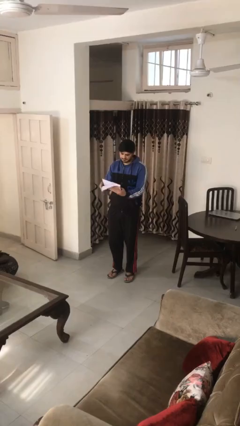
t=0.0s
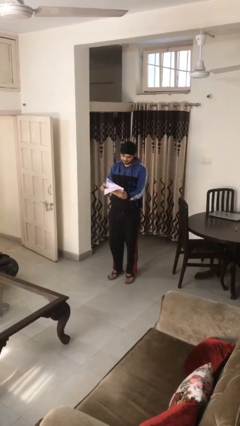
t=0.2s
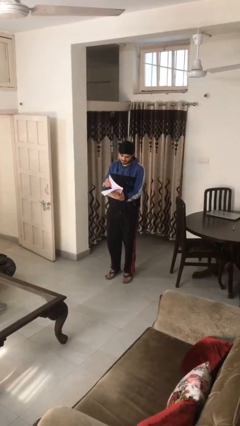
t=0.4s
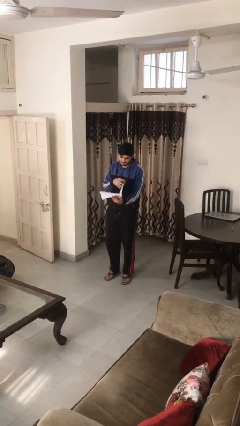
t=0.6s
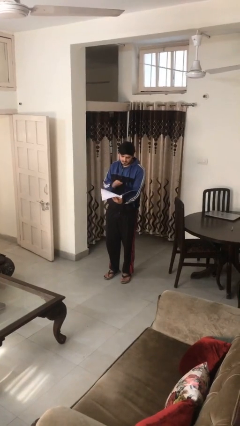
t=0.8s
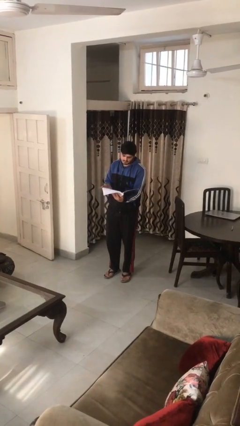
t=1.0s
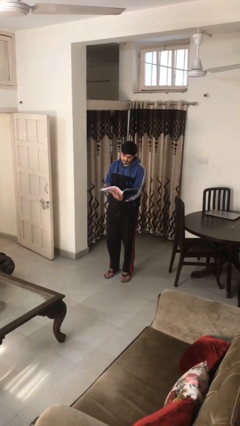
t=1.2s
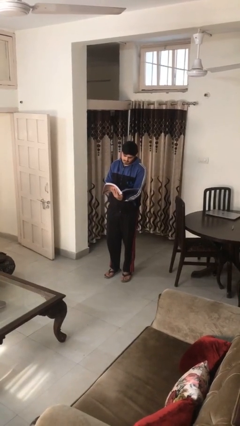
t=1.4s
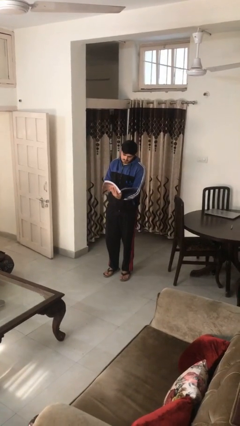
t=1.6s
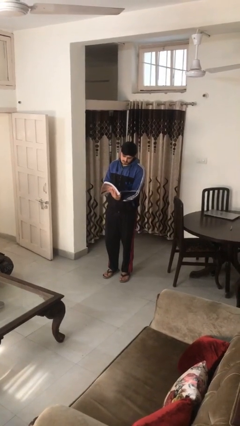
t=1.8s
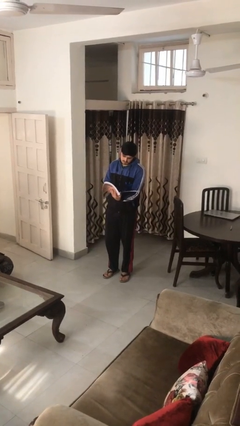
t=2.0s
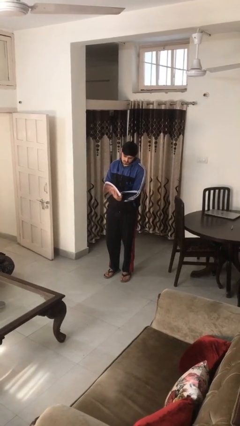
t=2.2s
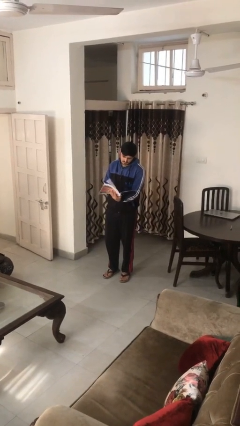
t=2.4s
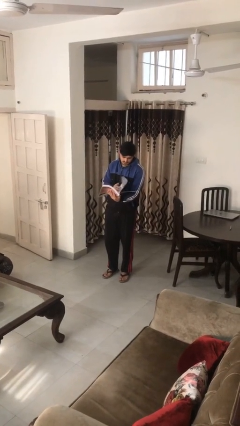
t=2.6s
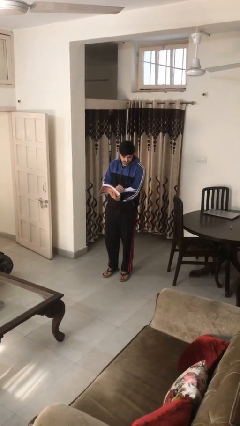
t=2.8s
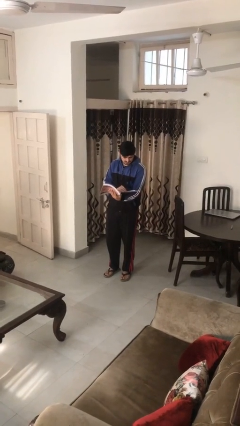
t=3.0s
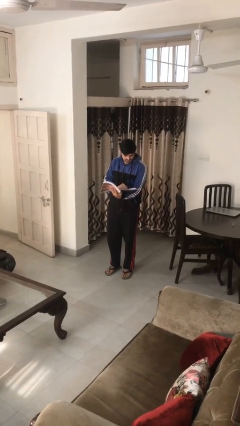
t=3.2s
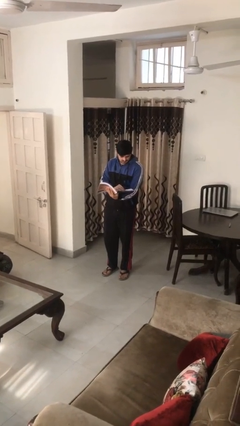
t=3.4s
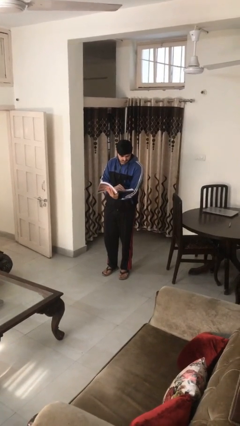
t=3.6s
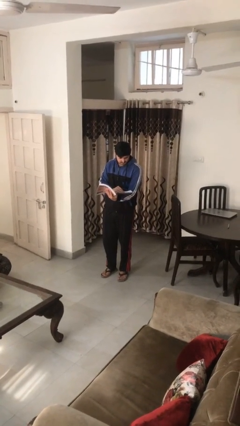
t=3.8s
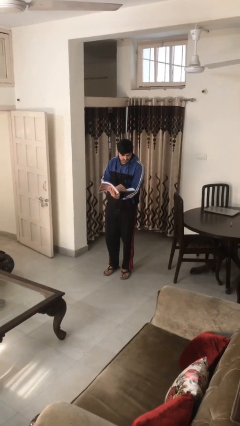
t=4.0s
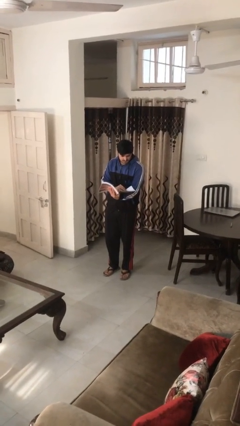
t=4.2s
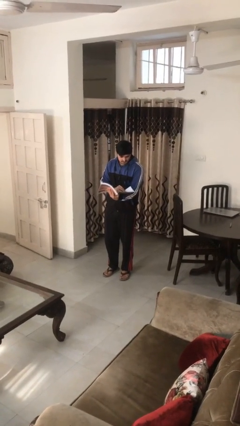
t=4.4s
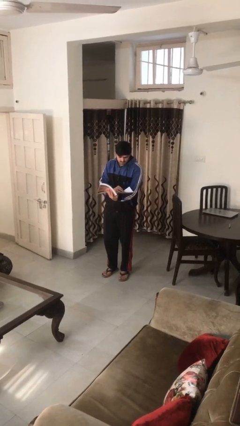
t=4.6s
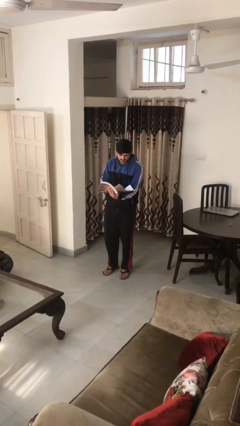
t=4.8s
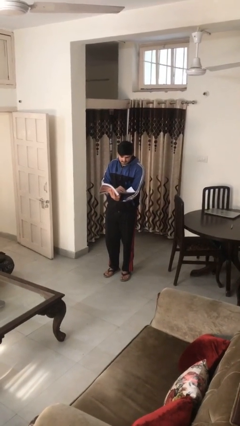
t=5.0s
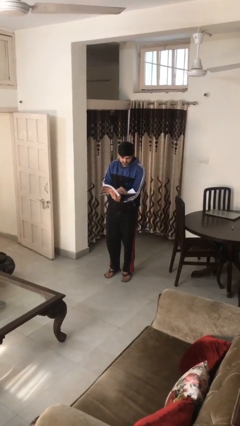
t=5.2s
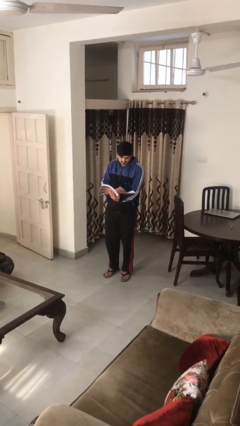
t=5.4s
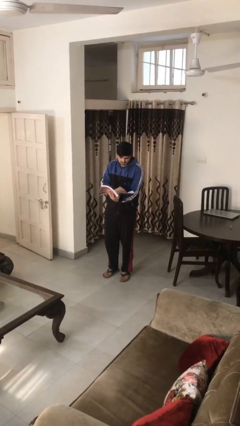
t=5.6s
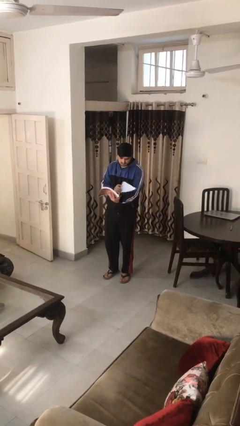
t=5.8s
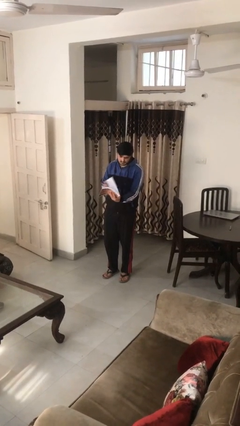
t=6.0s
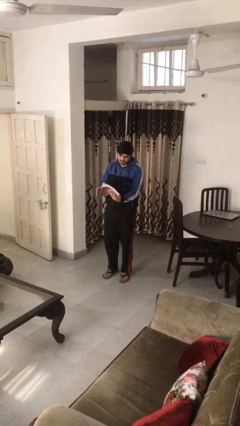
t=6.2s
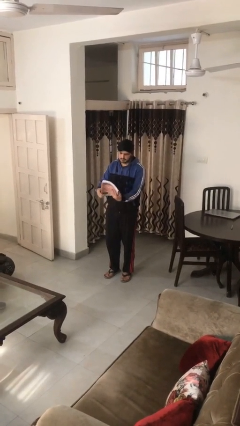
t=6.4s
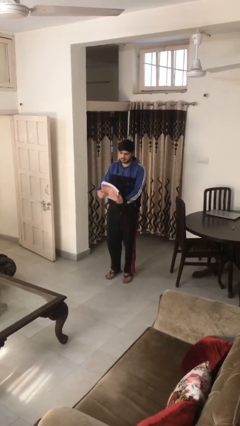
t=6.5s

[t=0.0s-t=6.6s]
person reads document

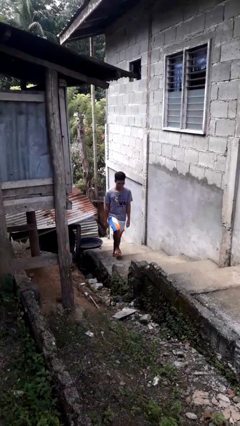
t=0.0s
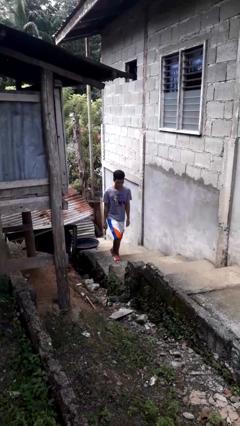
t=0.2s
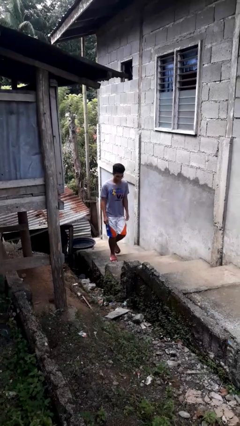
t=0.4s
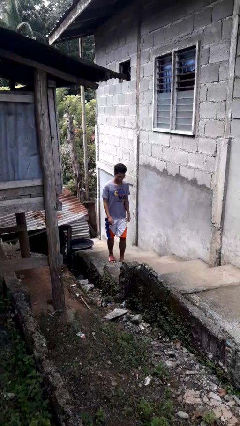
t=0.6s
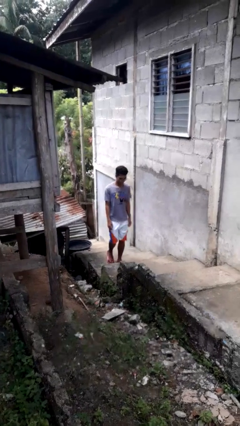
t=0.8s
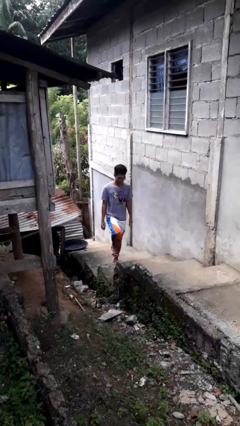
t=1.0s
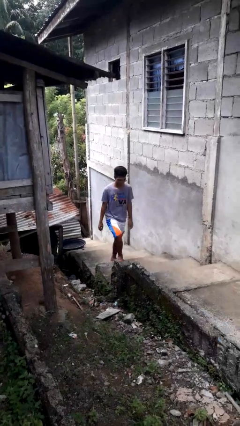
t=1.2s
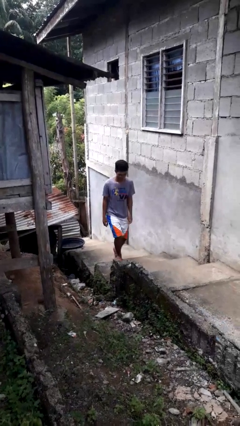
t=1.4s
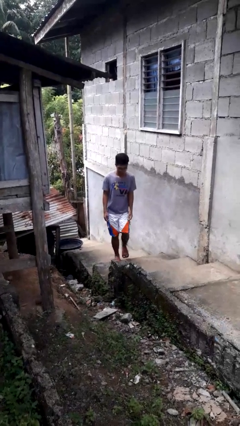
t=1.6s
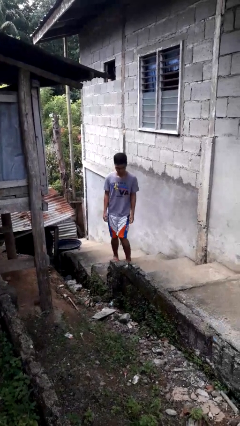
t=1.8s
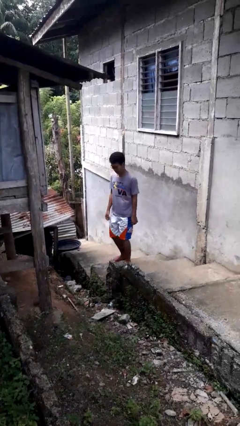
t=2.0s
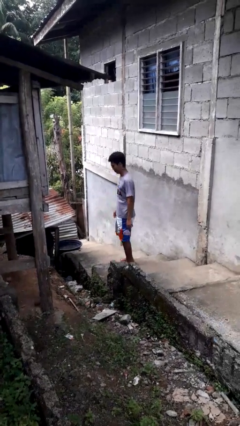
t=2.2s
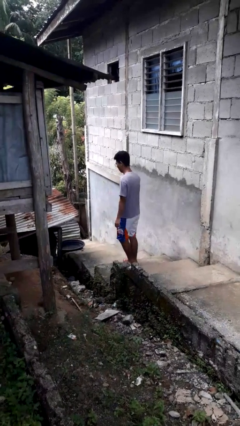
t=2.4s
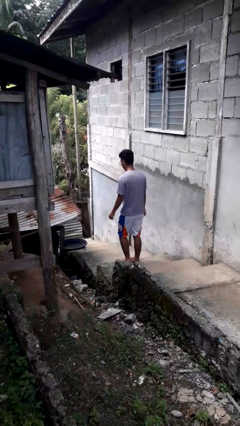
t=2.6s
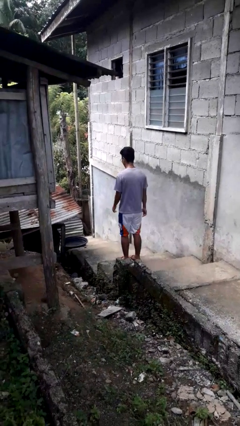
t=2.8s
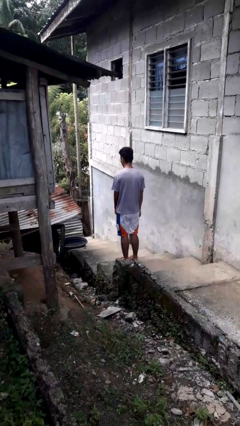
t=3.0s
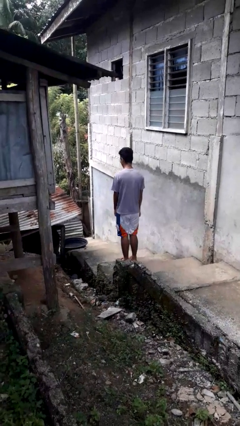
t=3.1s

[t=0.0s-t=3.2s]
person climbs up stairs

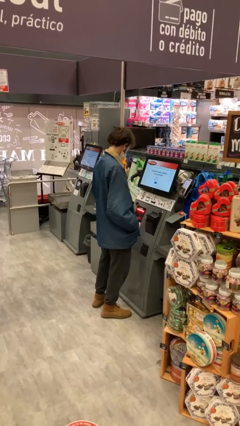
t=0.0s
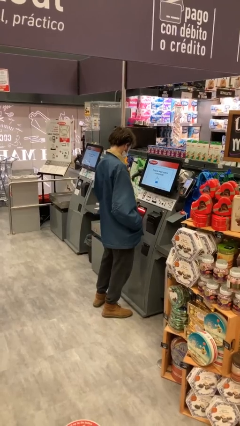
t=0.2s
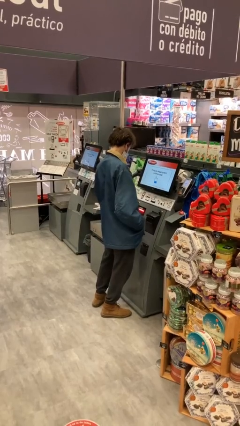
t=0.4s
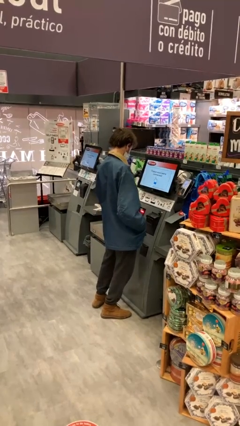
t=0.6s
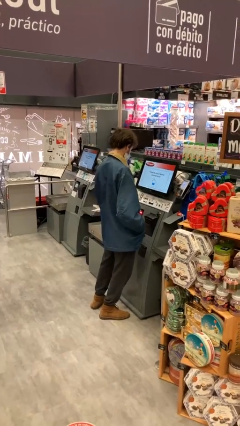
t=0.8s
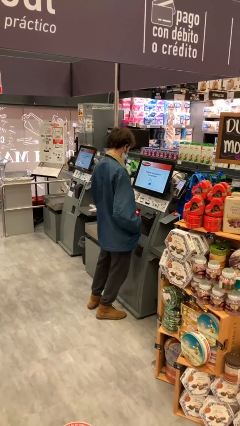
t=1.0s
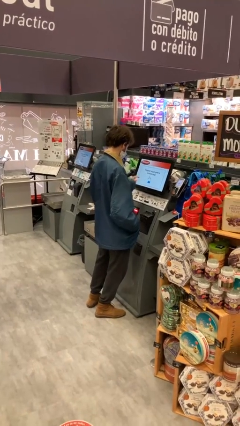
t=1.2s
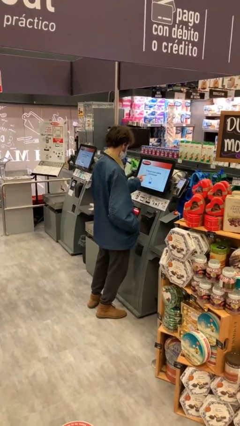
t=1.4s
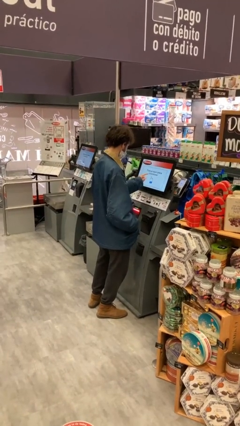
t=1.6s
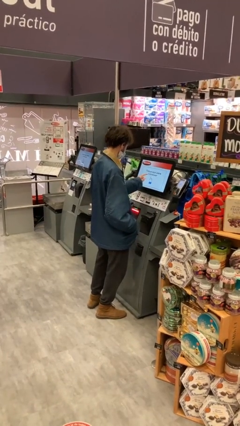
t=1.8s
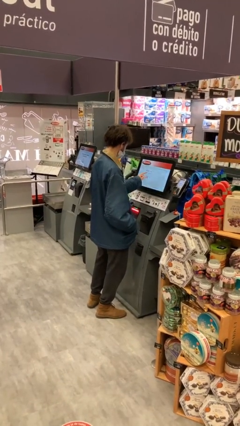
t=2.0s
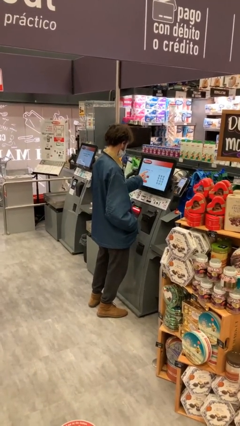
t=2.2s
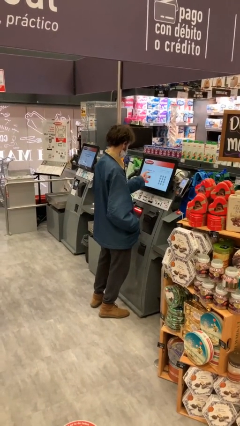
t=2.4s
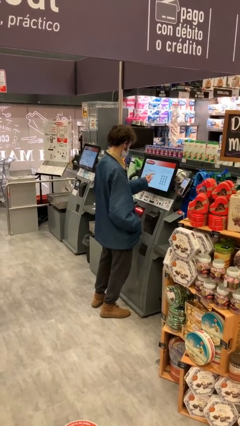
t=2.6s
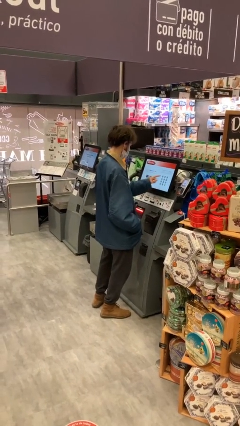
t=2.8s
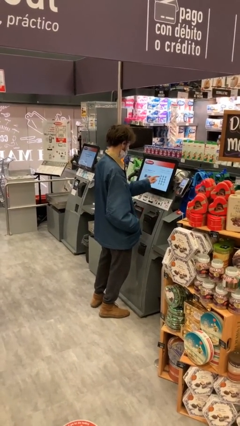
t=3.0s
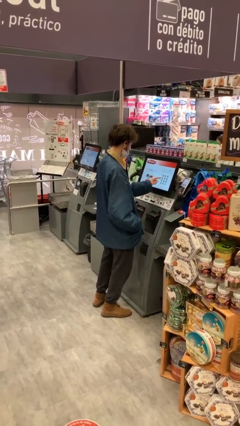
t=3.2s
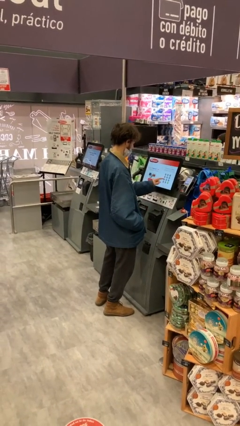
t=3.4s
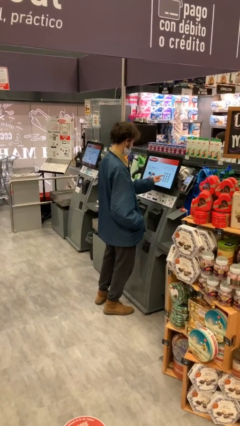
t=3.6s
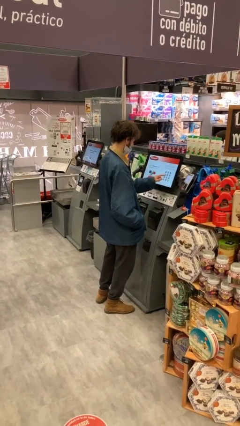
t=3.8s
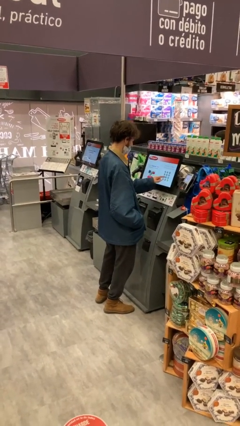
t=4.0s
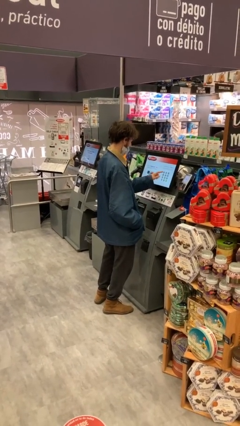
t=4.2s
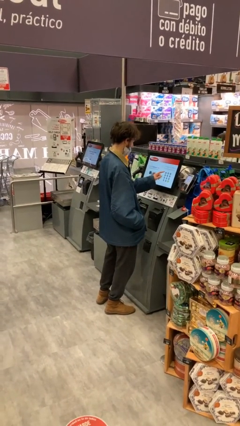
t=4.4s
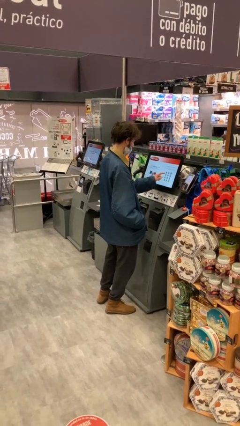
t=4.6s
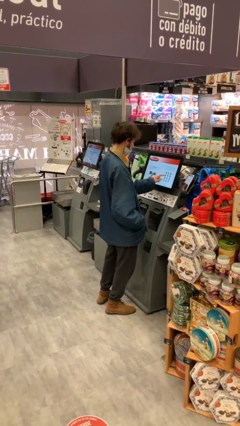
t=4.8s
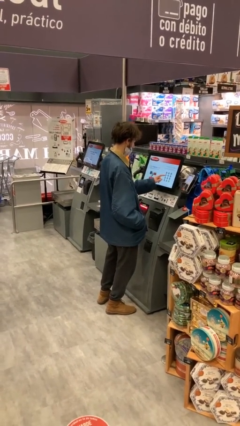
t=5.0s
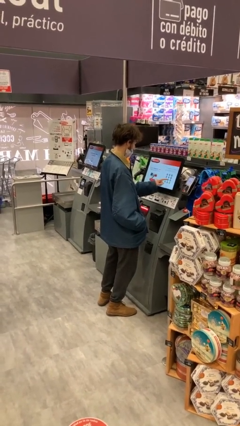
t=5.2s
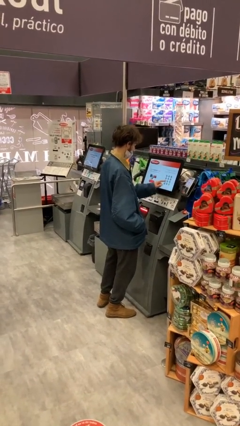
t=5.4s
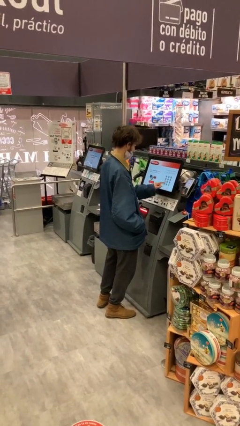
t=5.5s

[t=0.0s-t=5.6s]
person purchases from machine

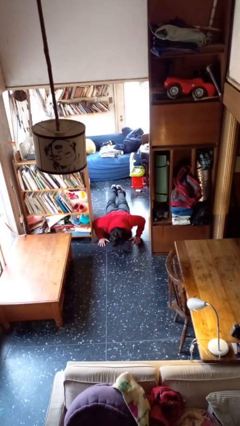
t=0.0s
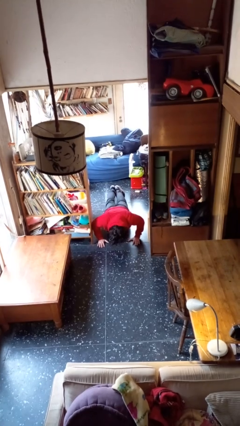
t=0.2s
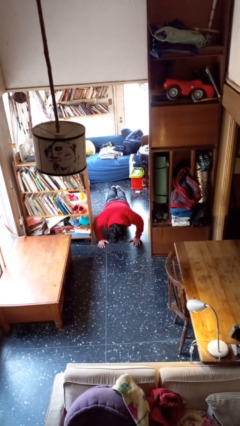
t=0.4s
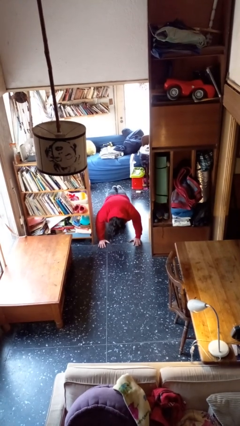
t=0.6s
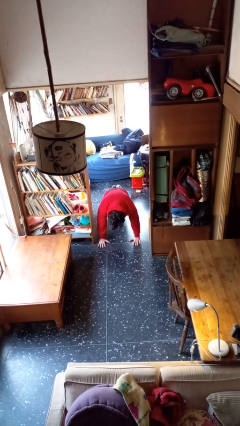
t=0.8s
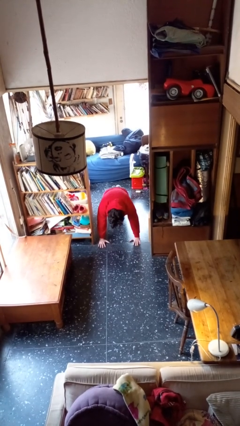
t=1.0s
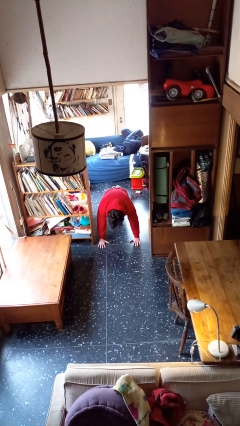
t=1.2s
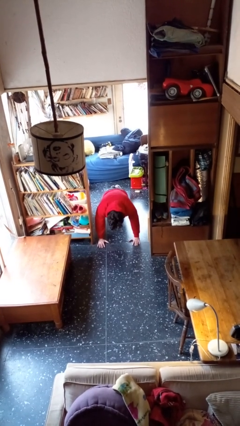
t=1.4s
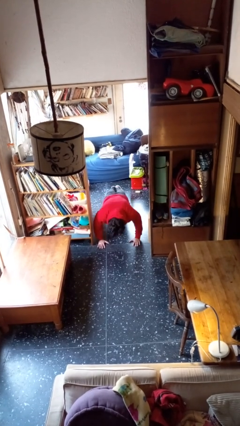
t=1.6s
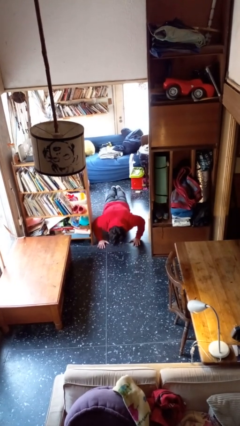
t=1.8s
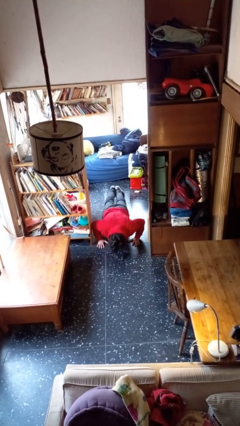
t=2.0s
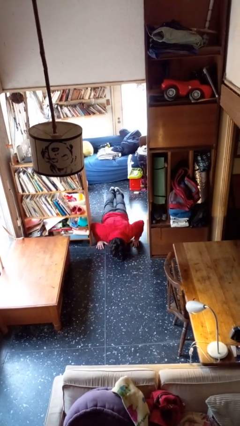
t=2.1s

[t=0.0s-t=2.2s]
person exercises with pushup

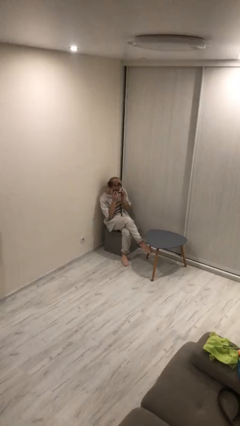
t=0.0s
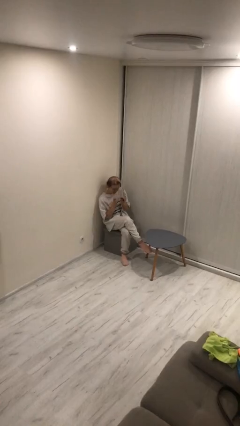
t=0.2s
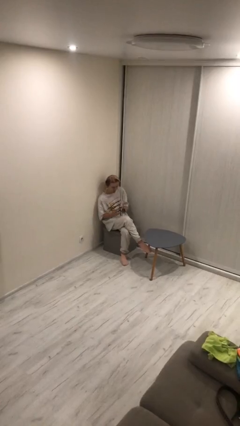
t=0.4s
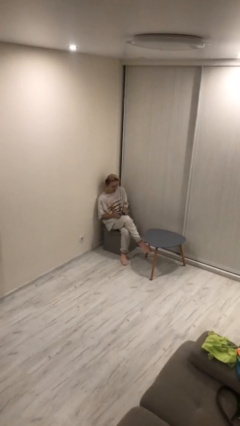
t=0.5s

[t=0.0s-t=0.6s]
person takes off sunglasses
